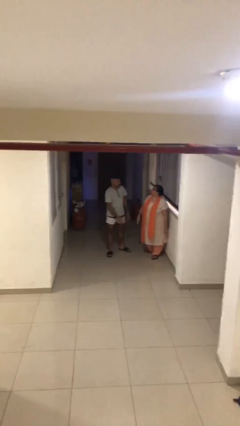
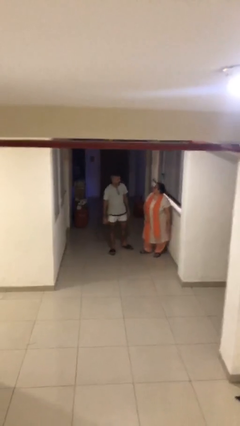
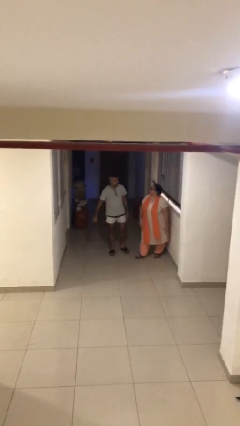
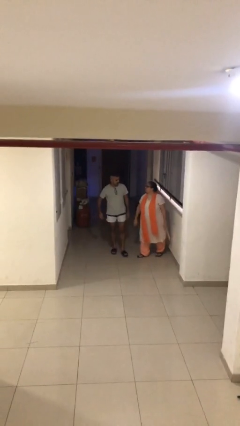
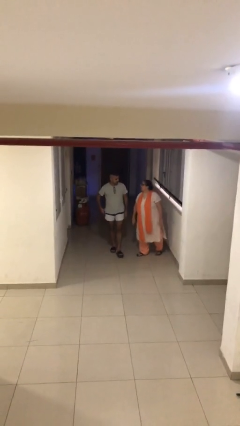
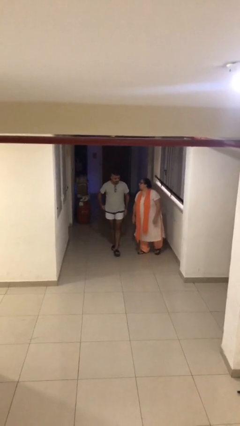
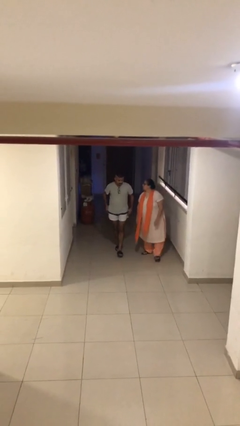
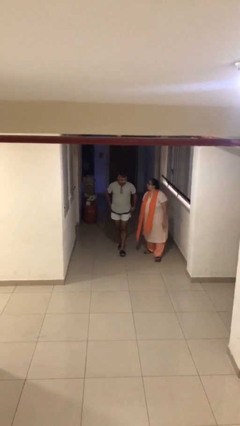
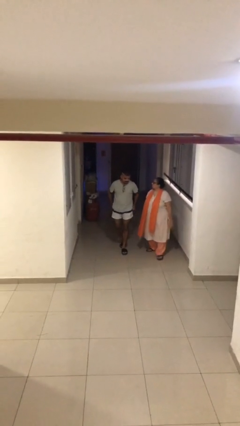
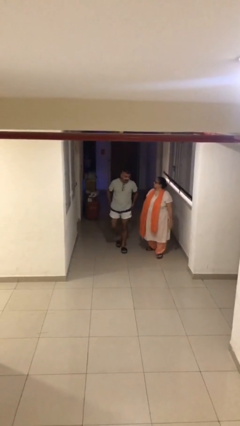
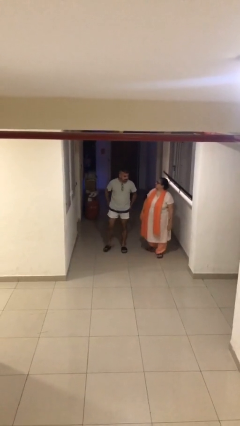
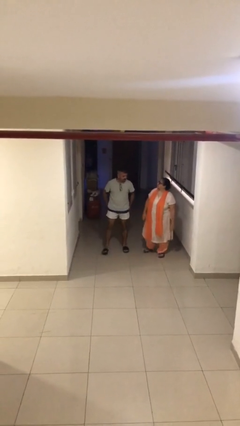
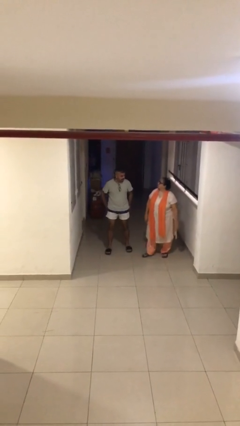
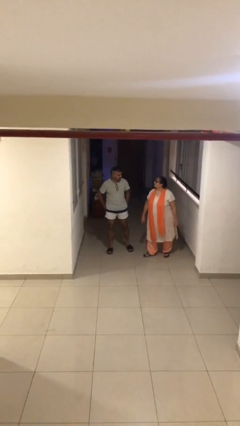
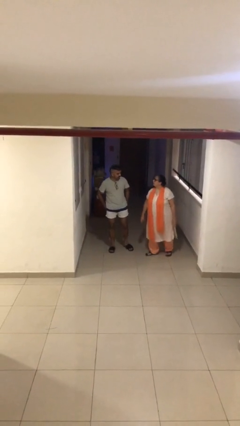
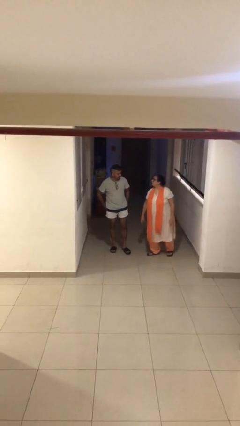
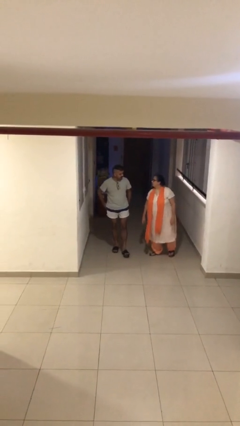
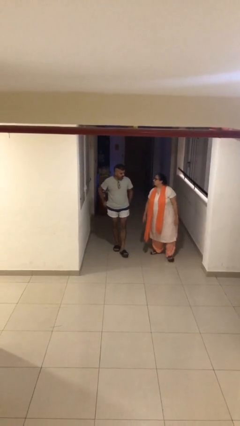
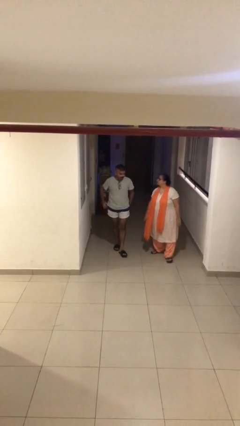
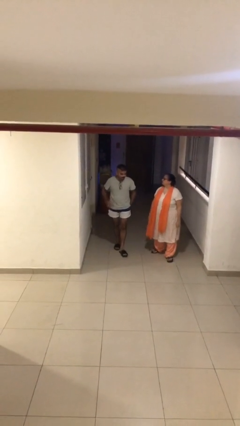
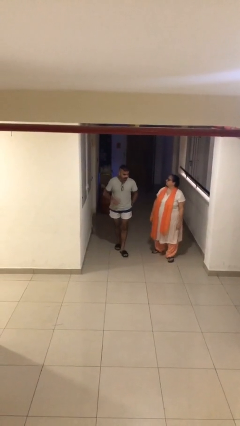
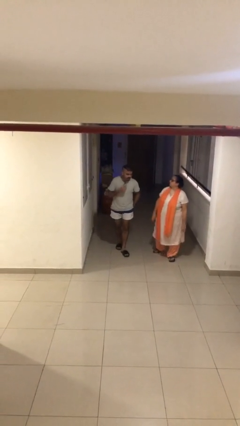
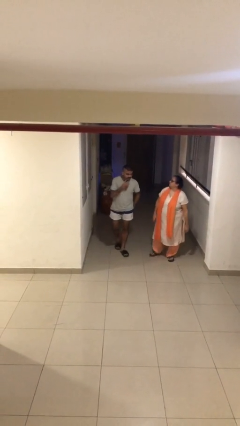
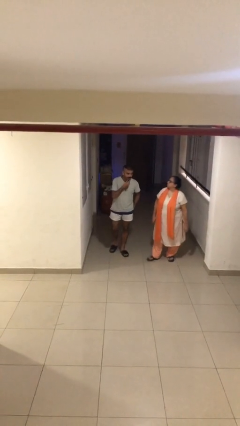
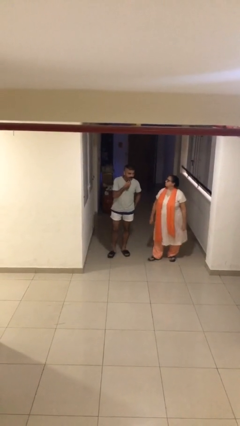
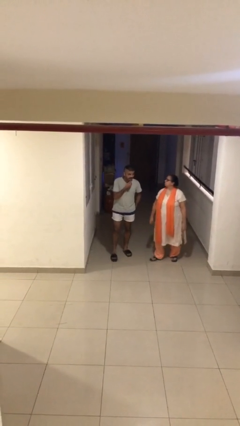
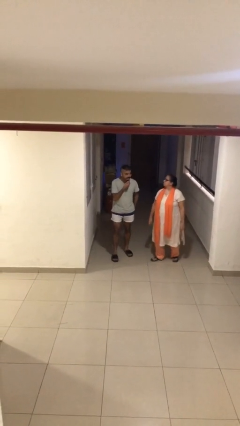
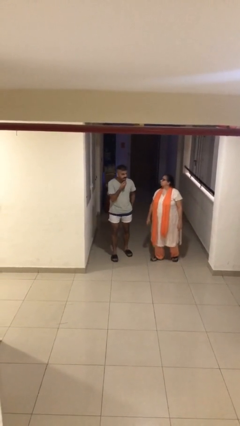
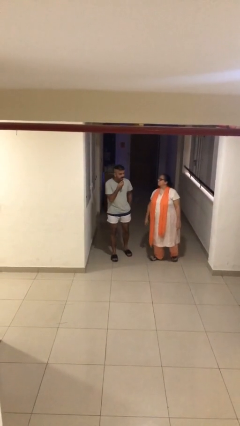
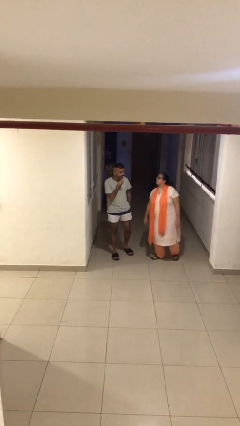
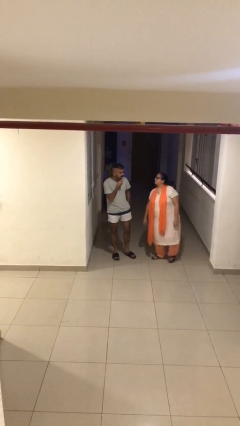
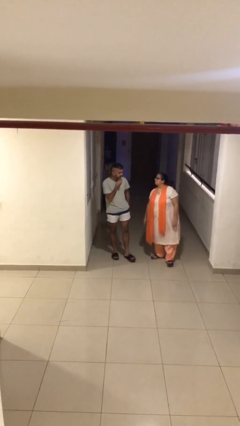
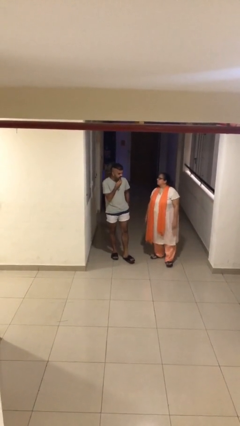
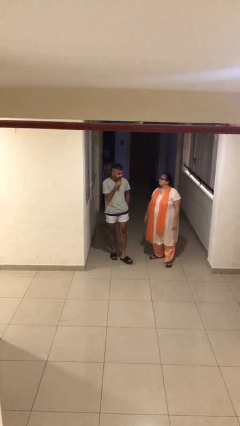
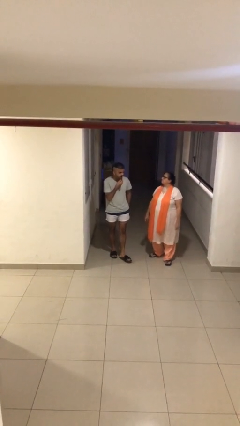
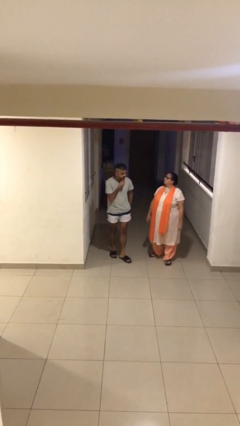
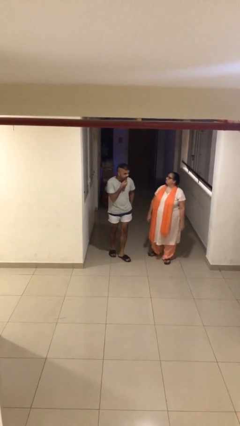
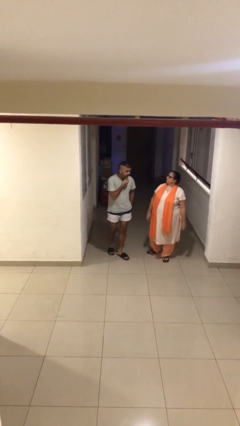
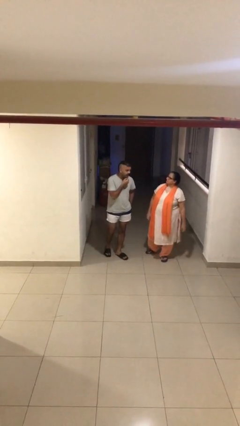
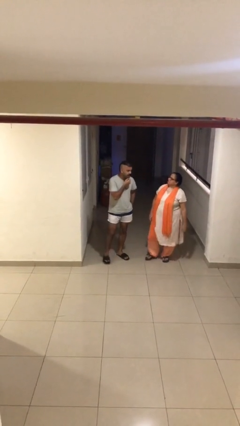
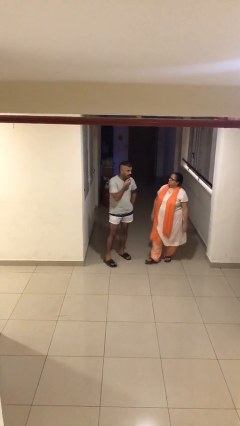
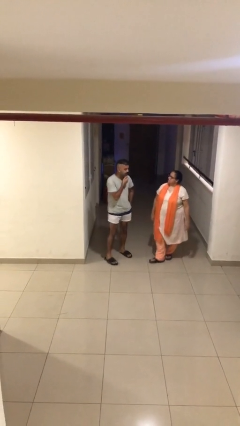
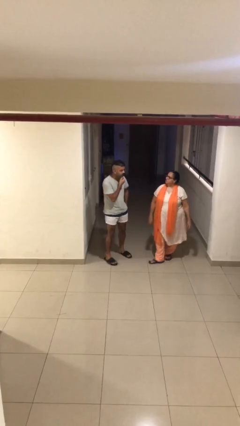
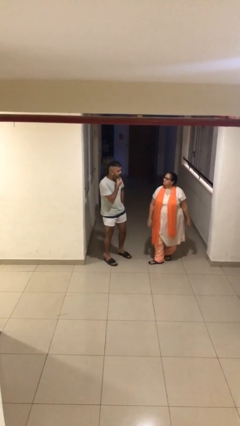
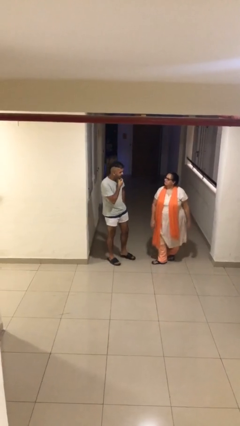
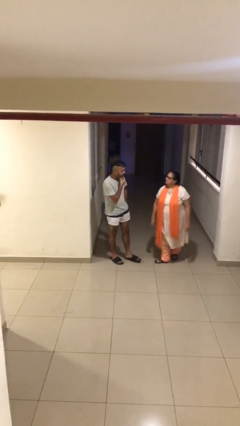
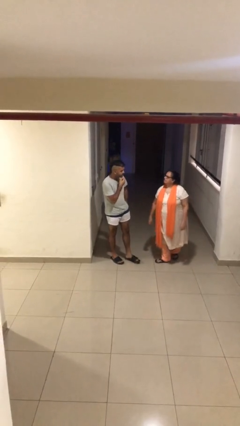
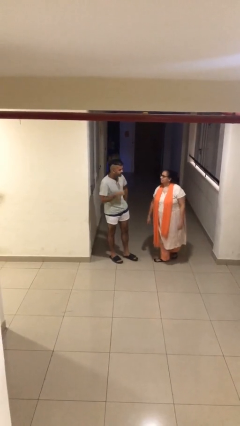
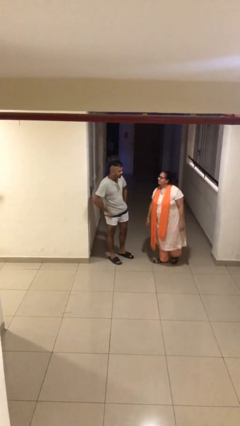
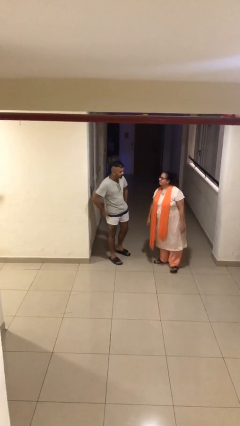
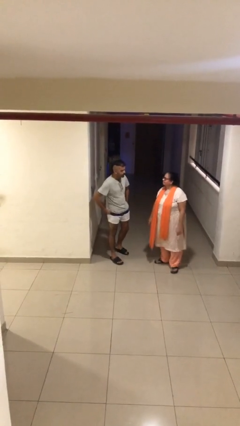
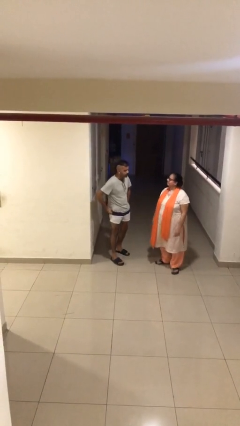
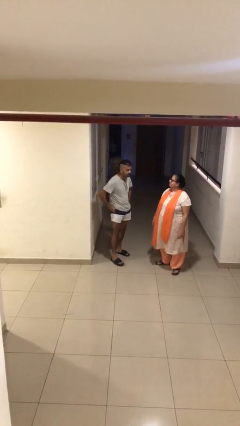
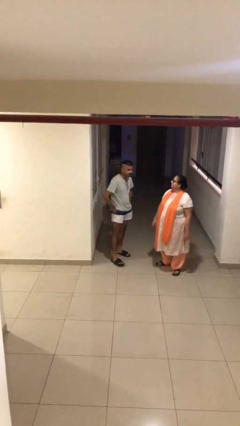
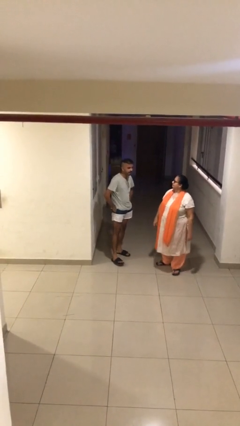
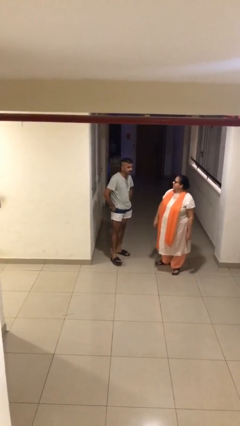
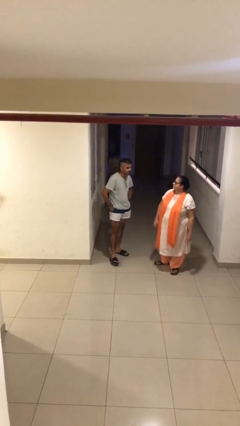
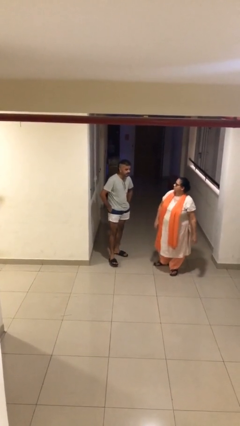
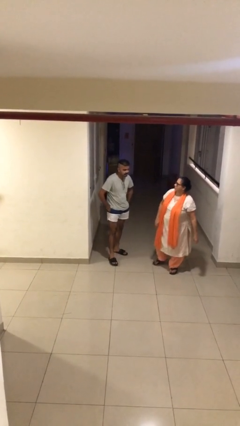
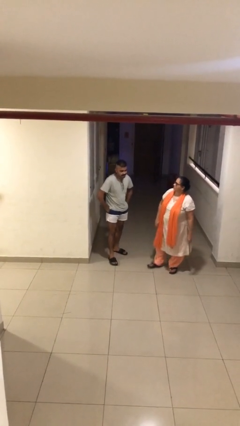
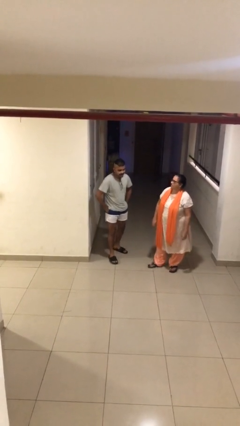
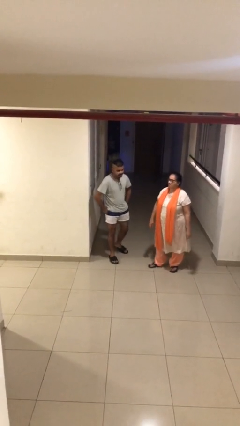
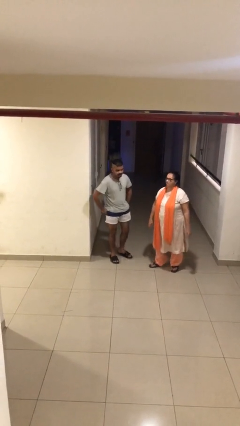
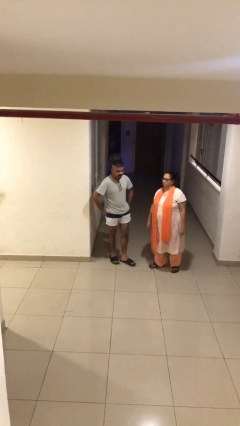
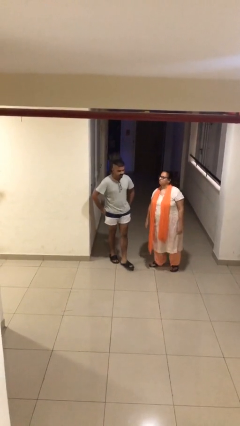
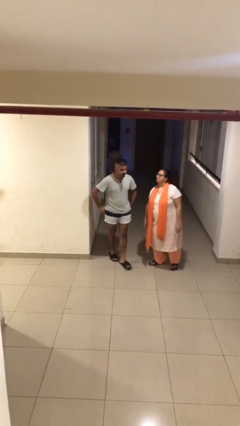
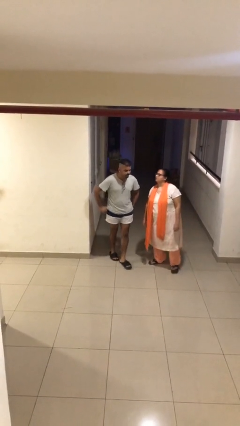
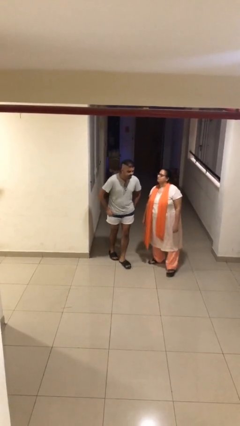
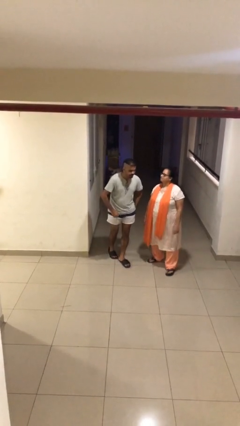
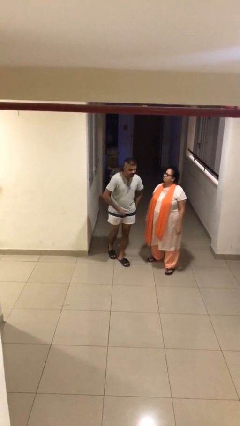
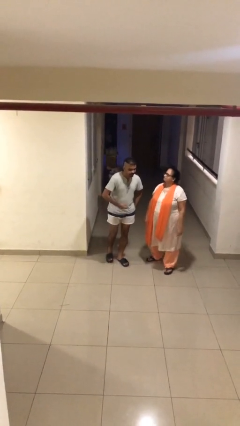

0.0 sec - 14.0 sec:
person talks to person

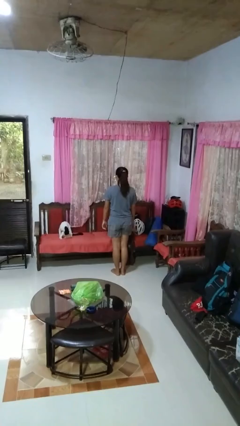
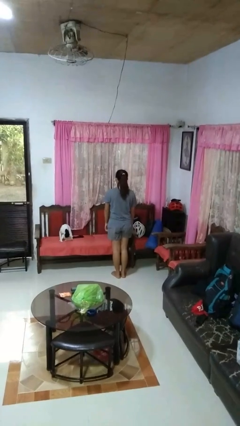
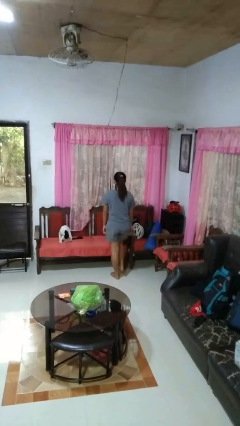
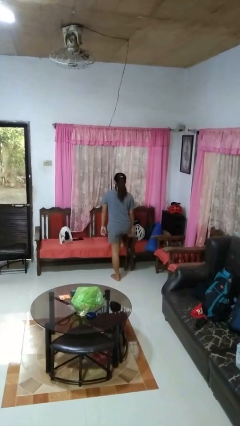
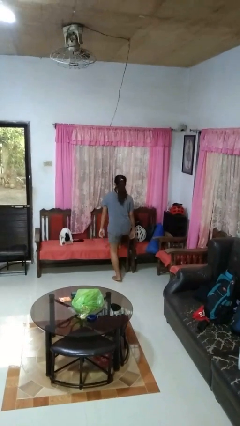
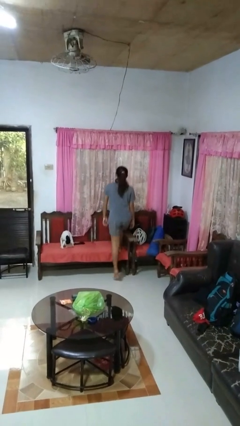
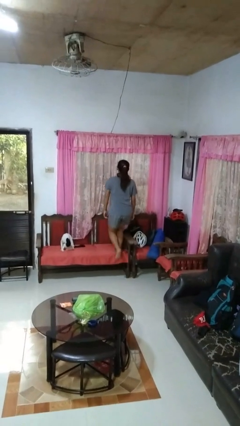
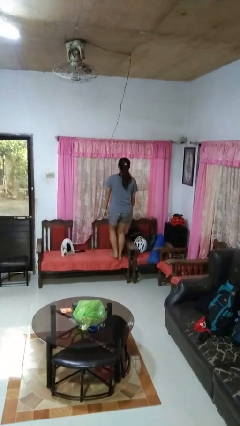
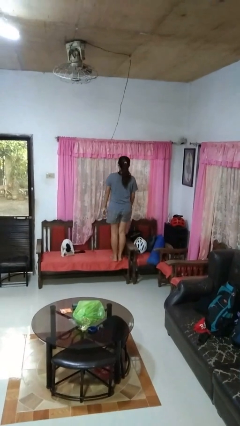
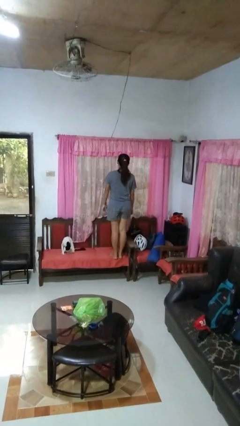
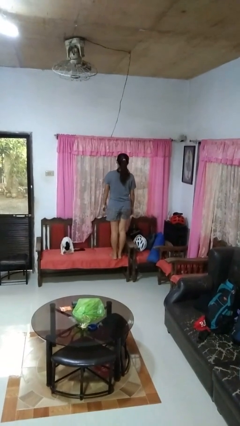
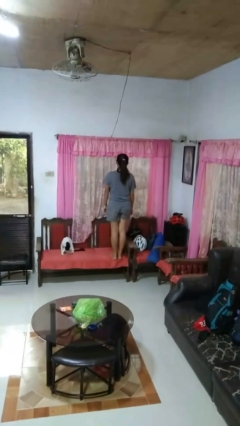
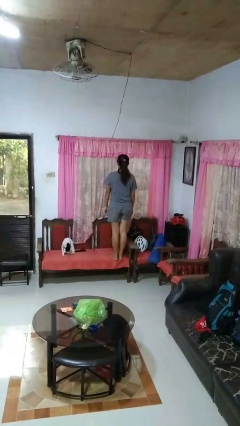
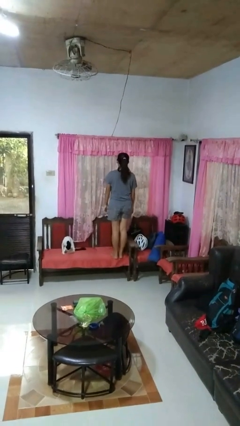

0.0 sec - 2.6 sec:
person climbs on chair

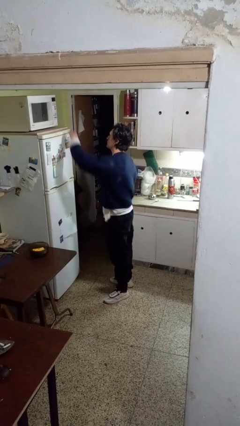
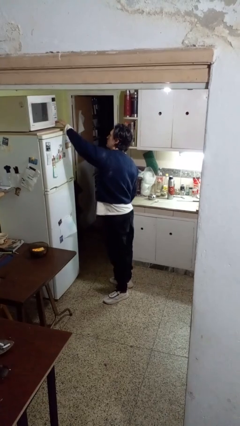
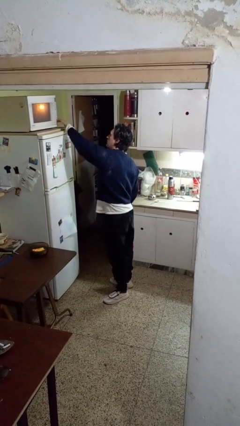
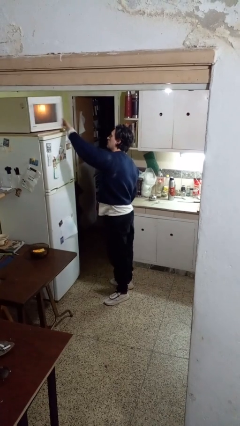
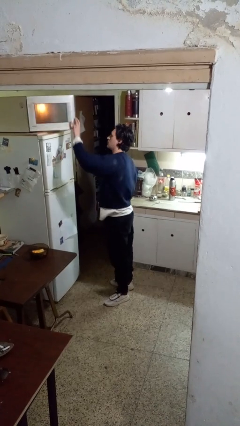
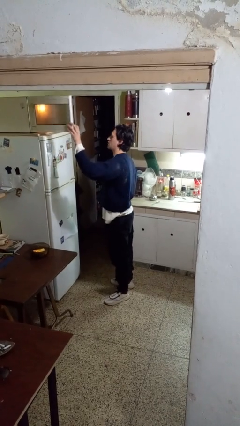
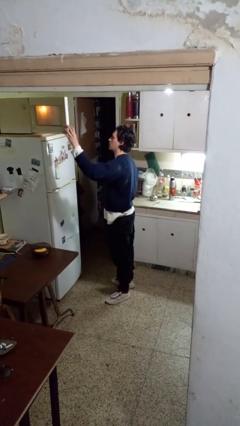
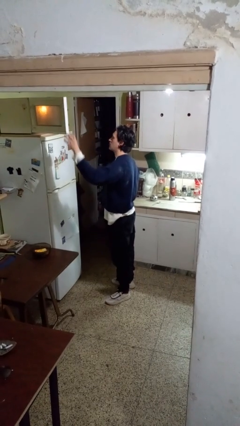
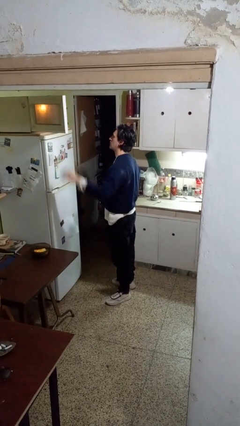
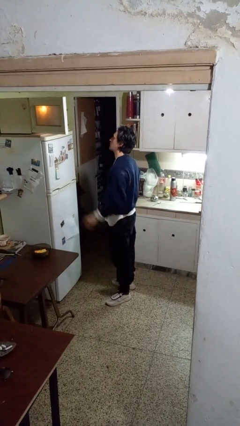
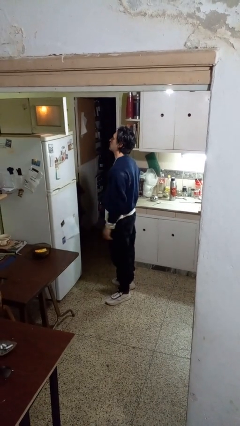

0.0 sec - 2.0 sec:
person opens microwave
